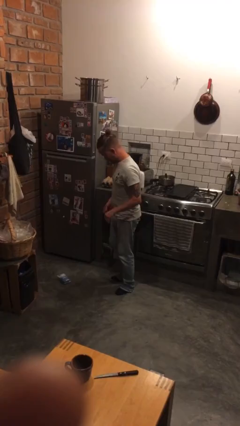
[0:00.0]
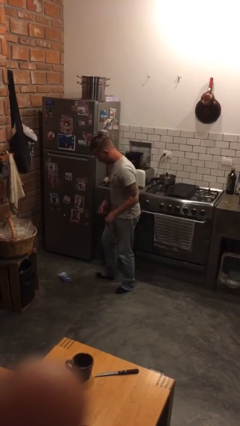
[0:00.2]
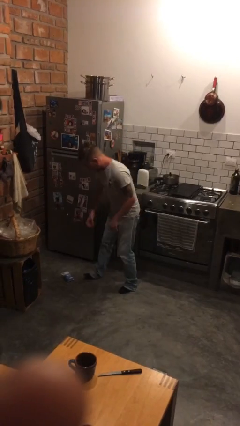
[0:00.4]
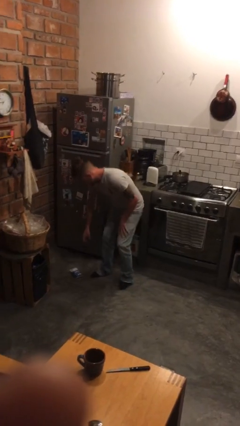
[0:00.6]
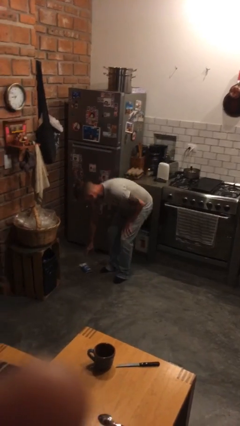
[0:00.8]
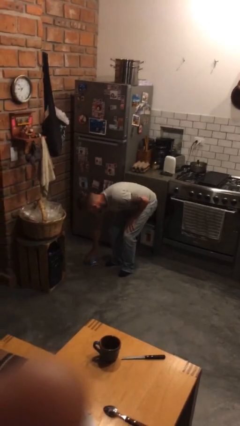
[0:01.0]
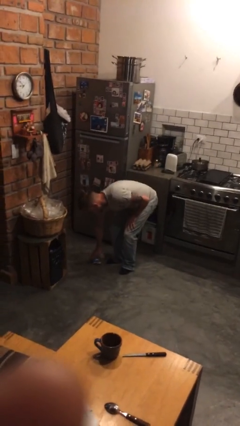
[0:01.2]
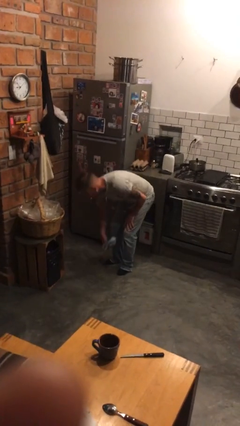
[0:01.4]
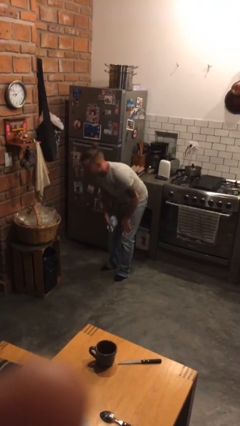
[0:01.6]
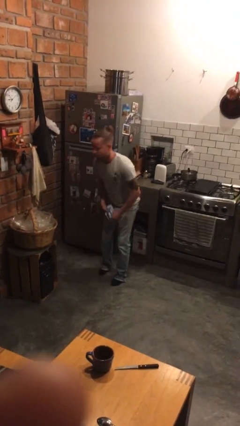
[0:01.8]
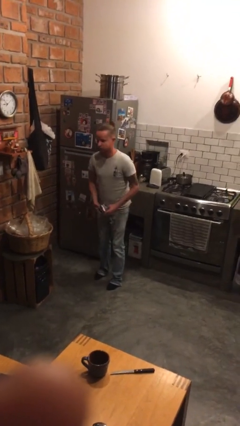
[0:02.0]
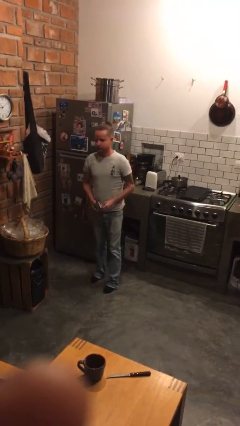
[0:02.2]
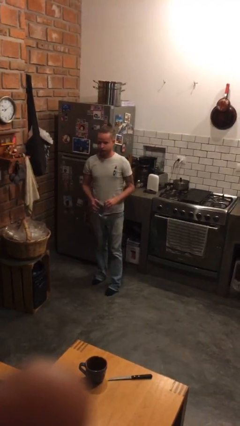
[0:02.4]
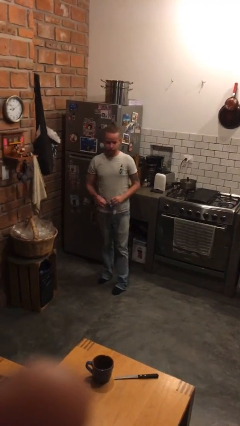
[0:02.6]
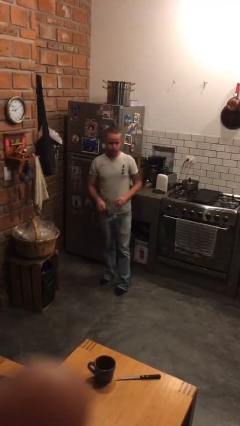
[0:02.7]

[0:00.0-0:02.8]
person picks up object from floor

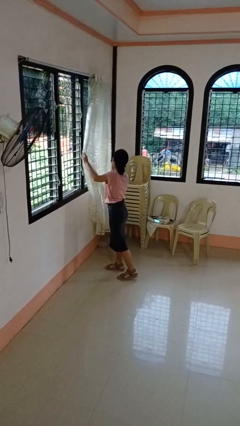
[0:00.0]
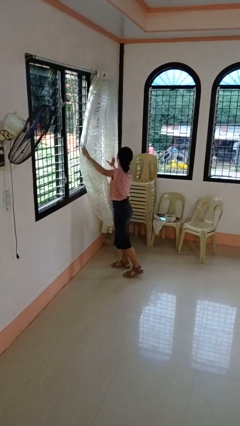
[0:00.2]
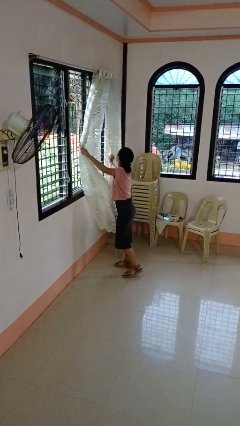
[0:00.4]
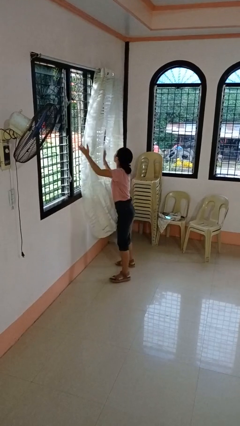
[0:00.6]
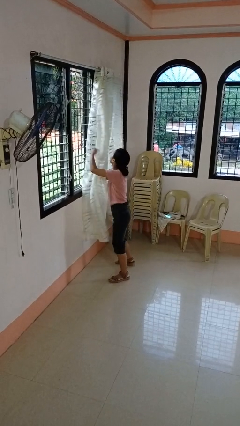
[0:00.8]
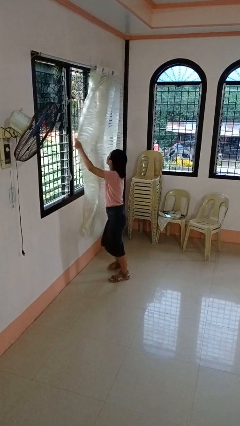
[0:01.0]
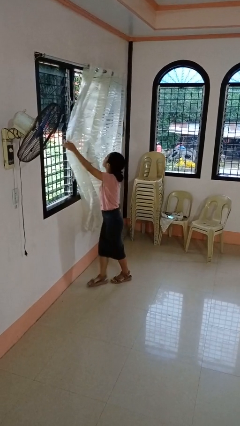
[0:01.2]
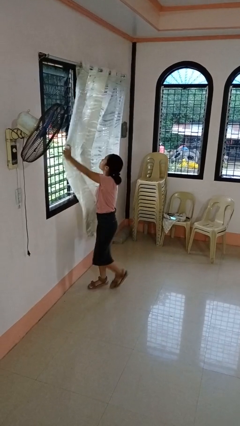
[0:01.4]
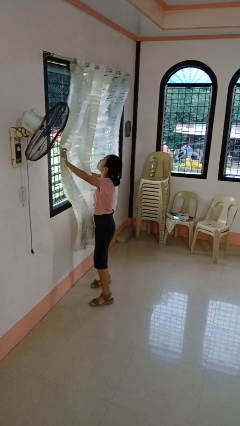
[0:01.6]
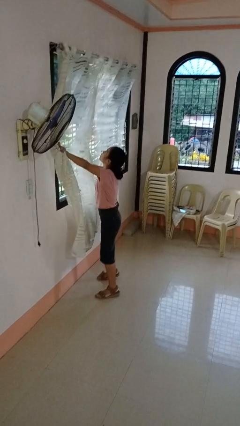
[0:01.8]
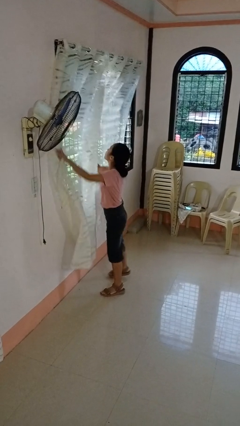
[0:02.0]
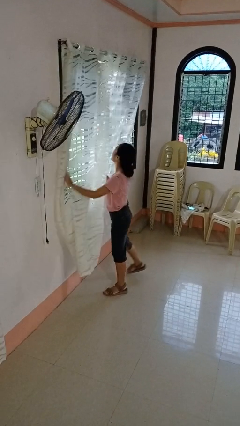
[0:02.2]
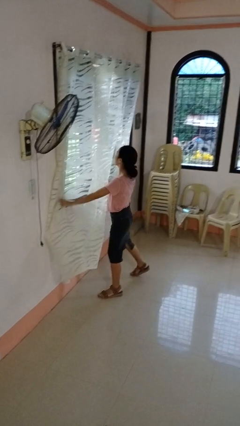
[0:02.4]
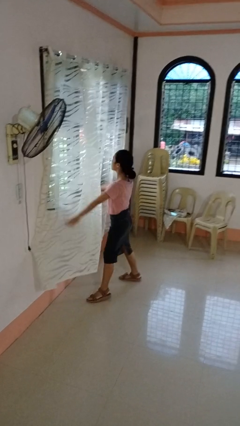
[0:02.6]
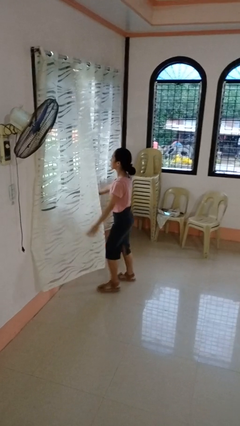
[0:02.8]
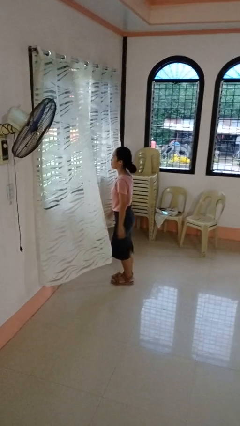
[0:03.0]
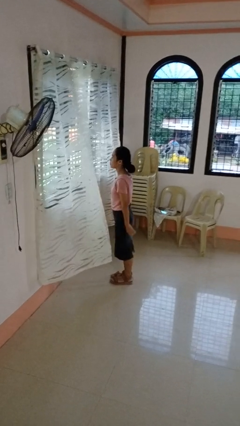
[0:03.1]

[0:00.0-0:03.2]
person closes curtains

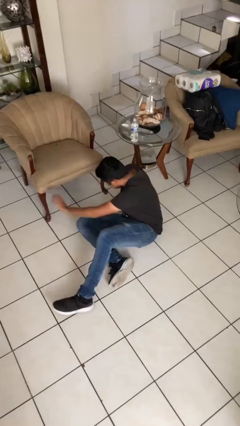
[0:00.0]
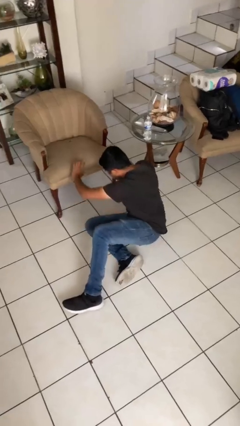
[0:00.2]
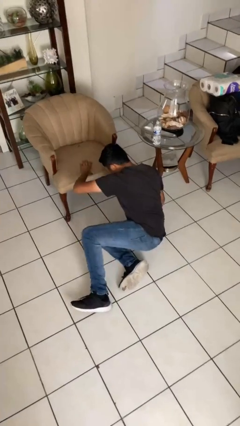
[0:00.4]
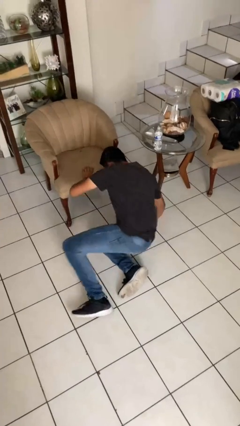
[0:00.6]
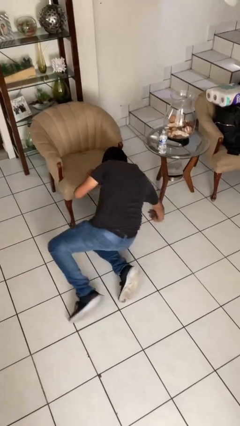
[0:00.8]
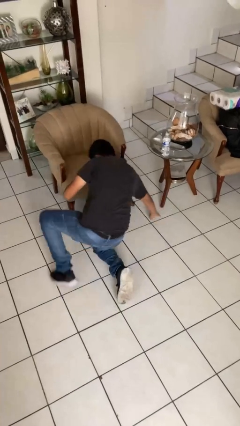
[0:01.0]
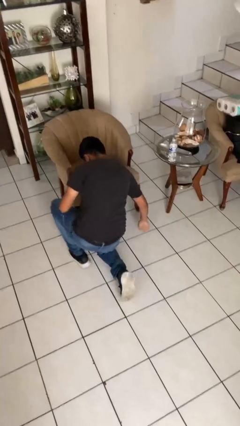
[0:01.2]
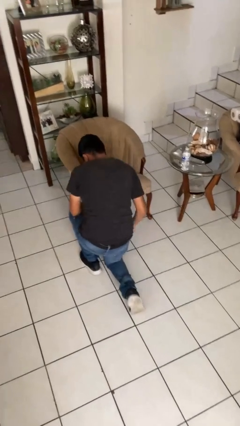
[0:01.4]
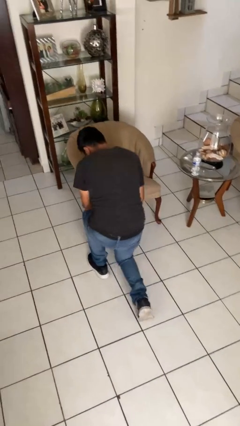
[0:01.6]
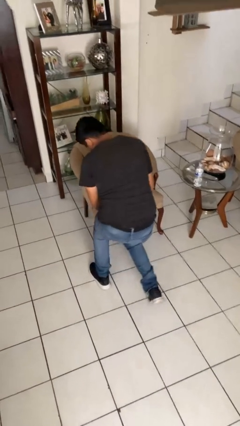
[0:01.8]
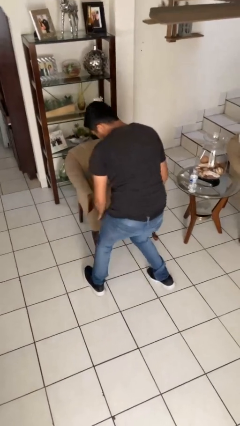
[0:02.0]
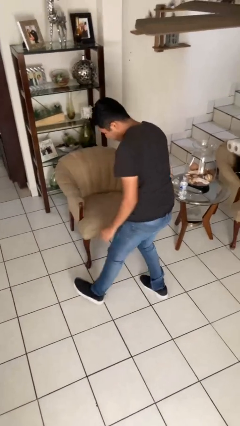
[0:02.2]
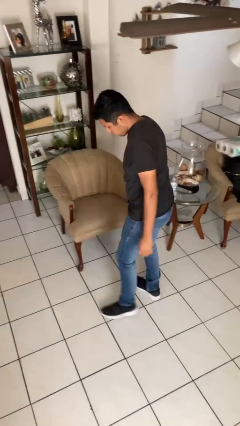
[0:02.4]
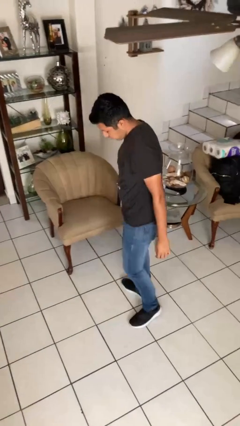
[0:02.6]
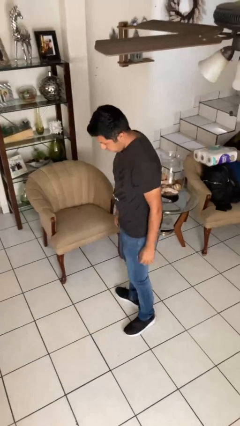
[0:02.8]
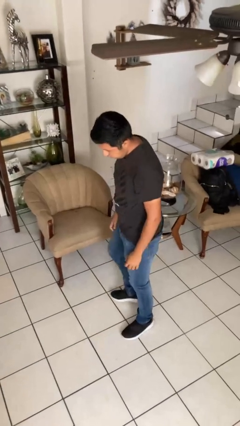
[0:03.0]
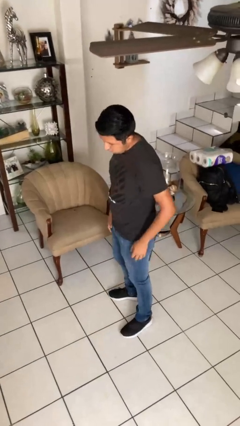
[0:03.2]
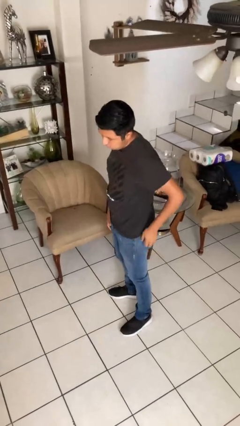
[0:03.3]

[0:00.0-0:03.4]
person stands up from floor

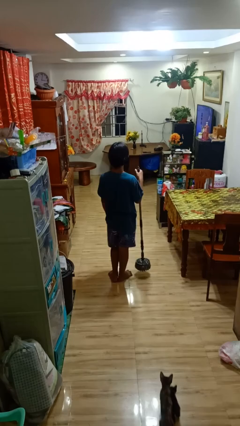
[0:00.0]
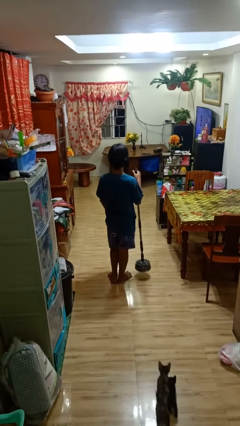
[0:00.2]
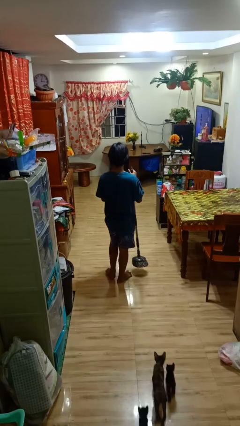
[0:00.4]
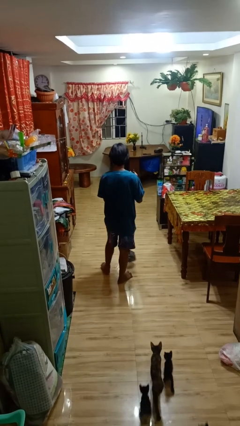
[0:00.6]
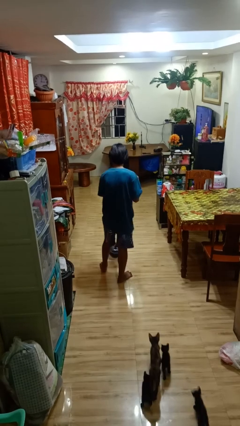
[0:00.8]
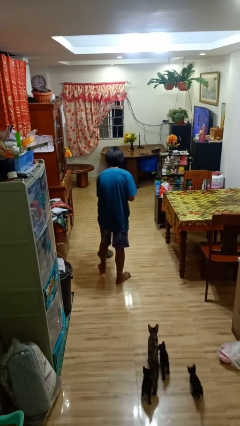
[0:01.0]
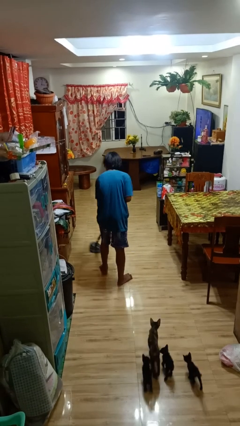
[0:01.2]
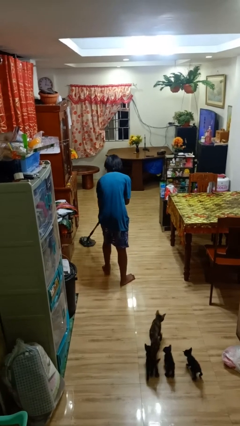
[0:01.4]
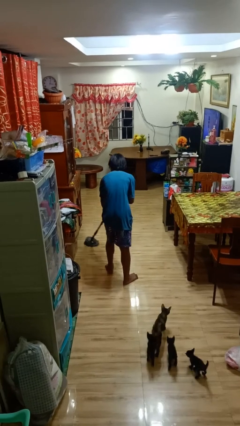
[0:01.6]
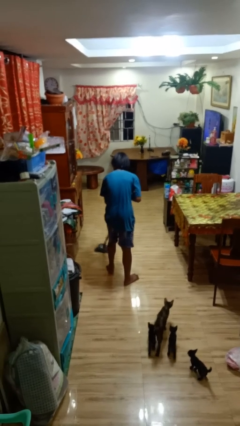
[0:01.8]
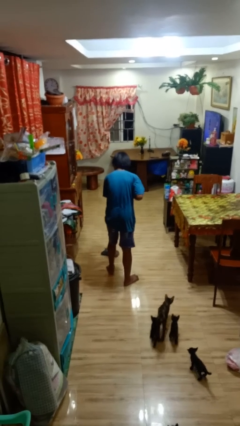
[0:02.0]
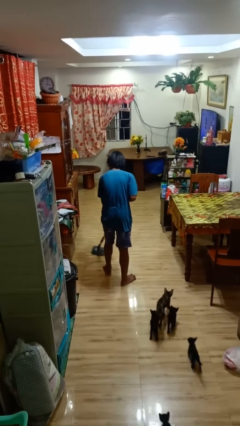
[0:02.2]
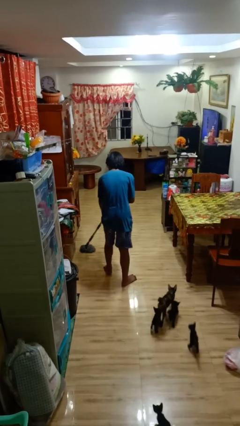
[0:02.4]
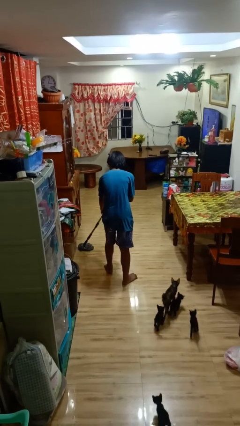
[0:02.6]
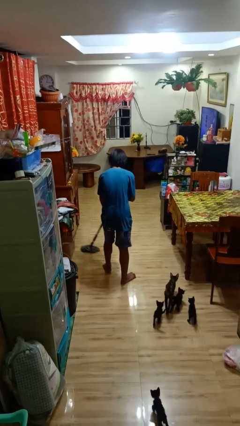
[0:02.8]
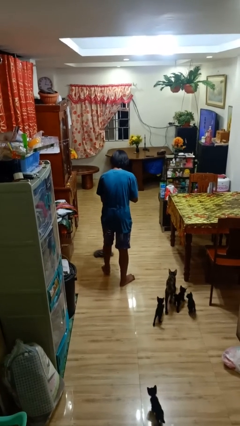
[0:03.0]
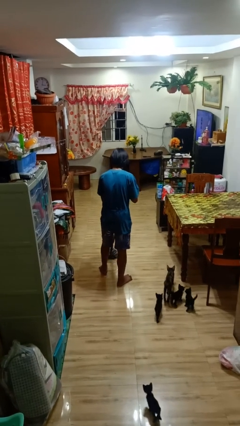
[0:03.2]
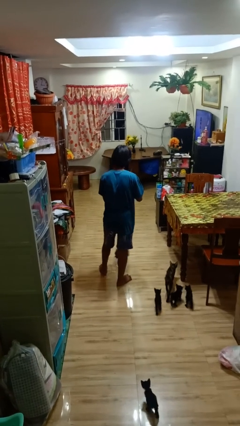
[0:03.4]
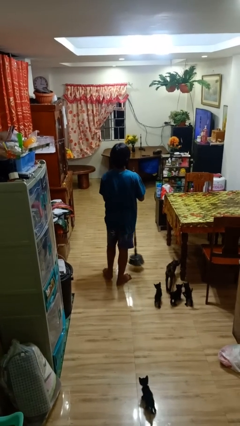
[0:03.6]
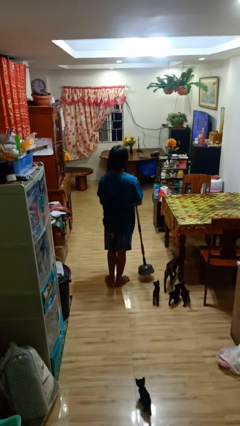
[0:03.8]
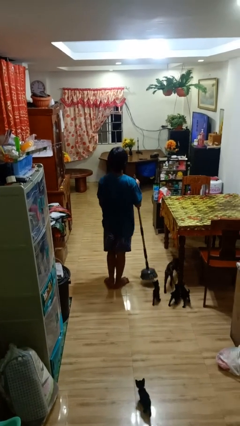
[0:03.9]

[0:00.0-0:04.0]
person mops

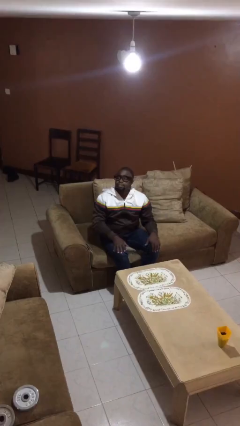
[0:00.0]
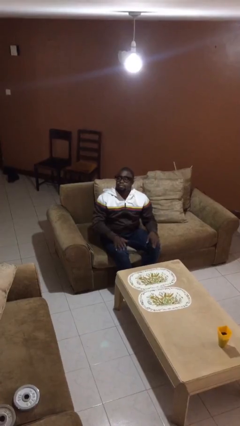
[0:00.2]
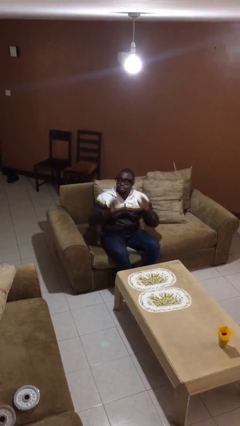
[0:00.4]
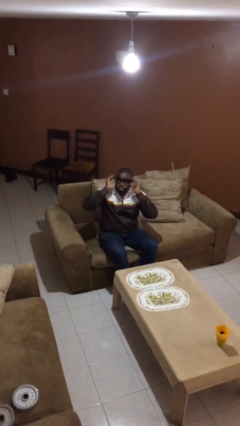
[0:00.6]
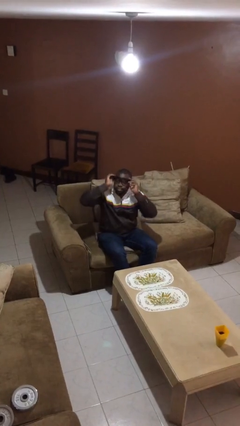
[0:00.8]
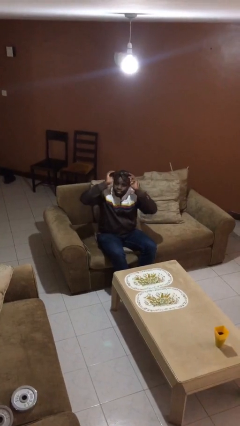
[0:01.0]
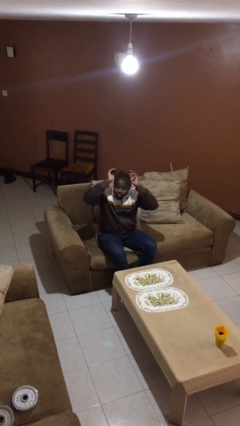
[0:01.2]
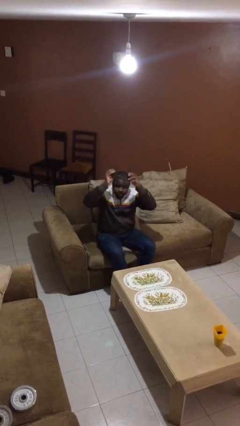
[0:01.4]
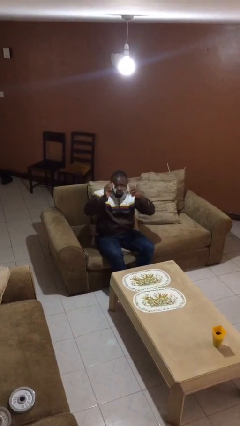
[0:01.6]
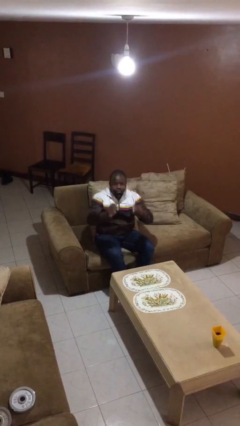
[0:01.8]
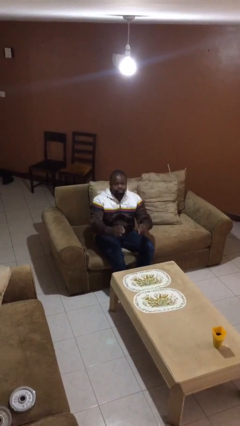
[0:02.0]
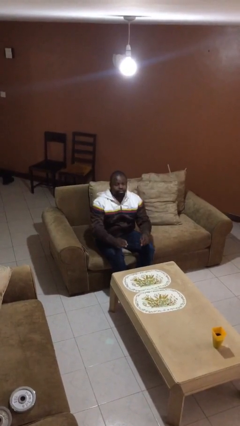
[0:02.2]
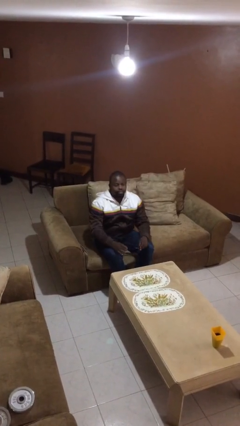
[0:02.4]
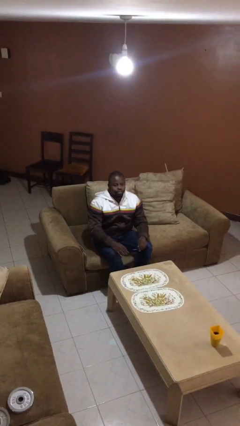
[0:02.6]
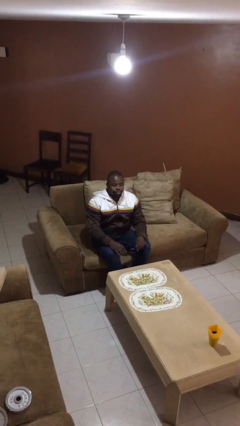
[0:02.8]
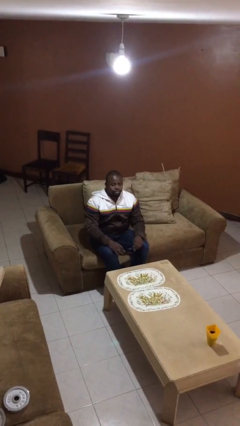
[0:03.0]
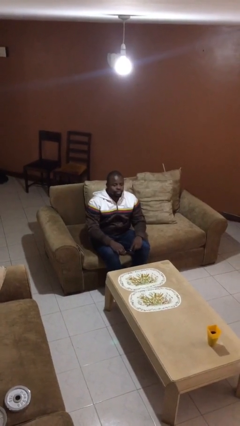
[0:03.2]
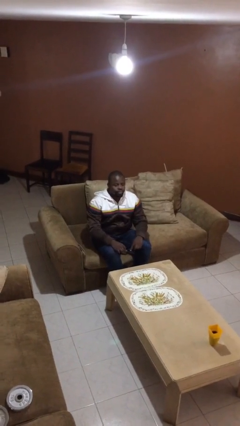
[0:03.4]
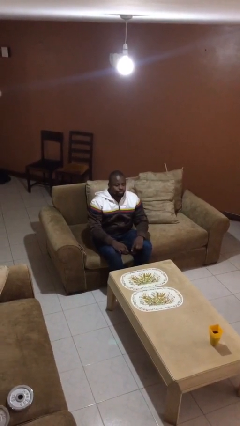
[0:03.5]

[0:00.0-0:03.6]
person takes off glasses

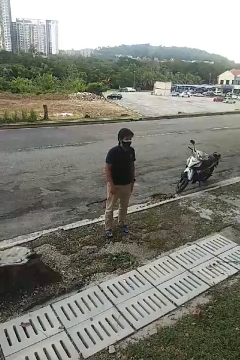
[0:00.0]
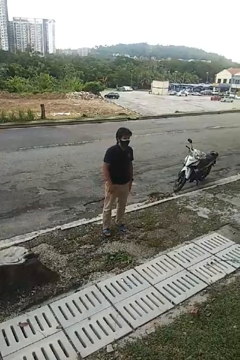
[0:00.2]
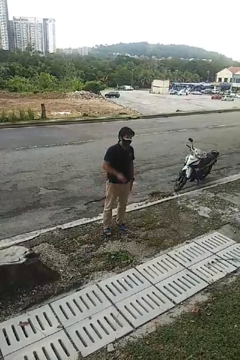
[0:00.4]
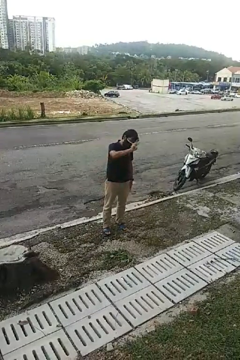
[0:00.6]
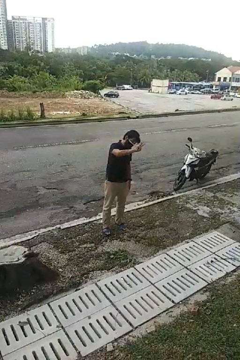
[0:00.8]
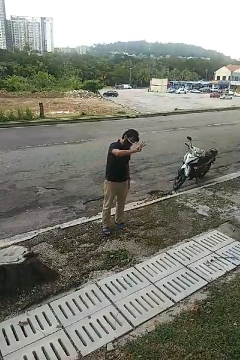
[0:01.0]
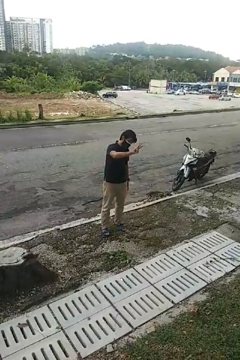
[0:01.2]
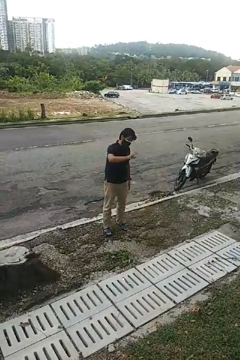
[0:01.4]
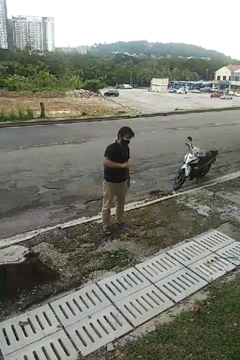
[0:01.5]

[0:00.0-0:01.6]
person gestures number three
